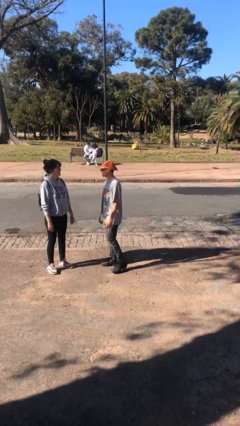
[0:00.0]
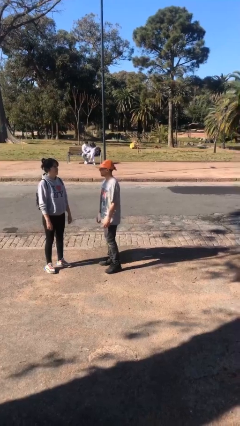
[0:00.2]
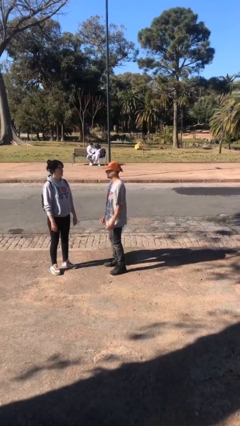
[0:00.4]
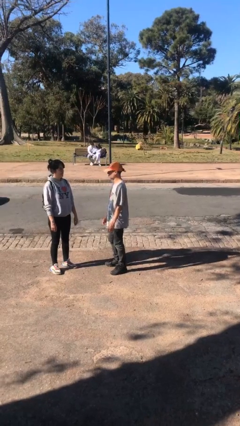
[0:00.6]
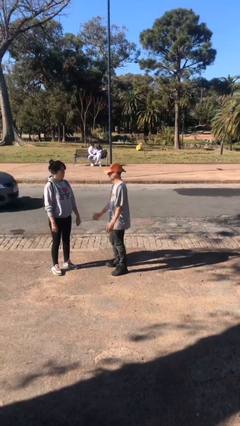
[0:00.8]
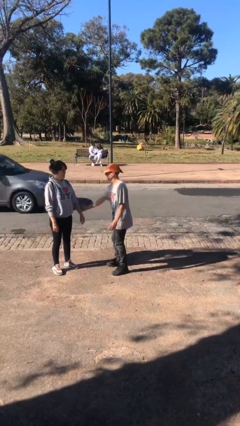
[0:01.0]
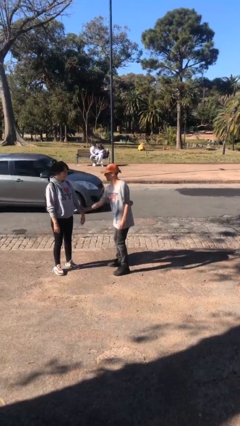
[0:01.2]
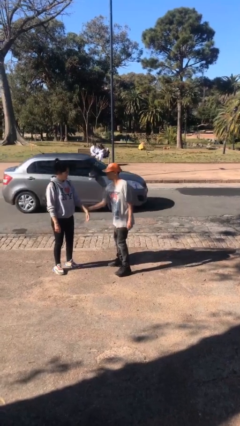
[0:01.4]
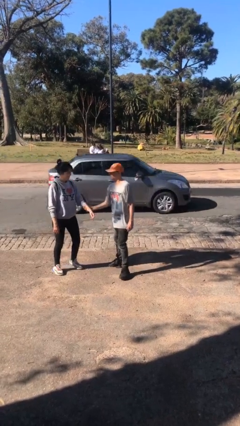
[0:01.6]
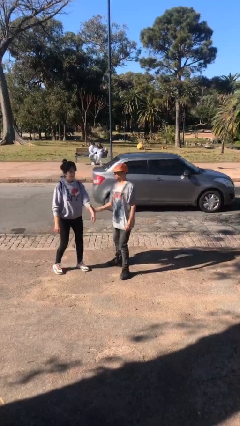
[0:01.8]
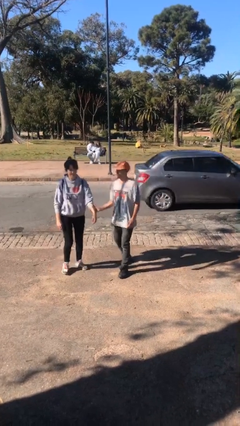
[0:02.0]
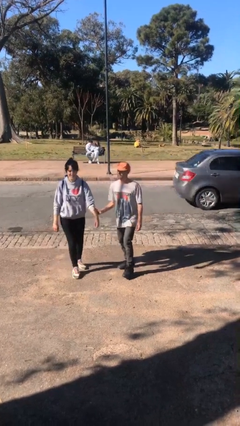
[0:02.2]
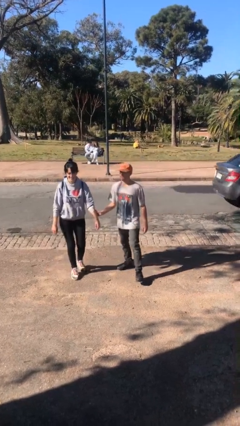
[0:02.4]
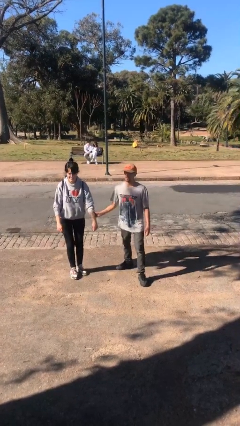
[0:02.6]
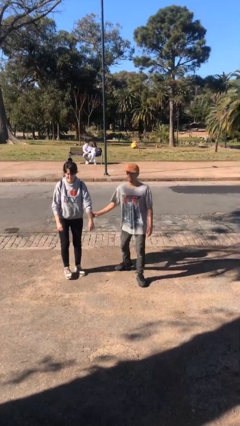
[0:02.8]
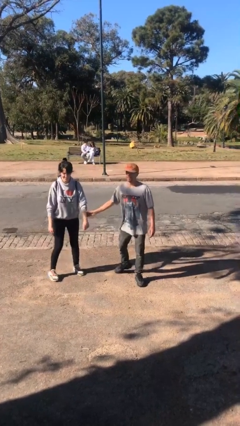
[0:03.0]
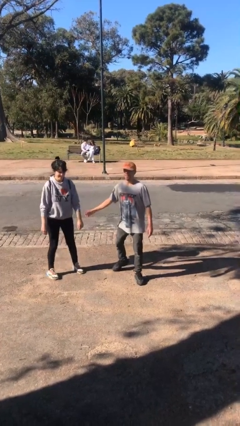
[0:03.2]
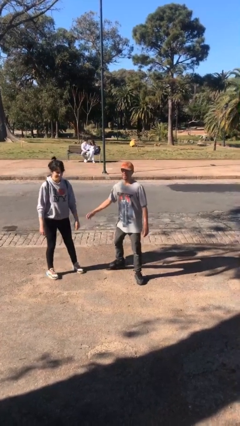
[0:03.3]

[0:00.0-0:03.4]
person grabs person by forearm

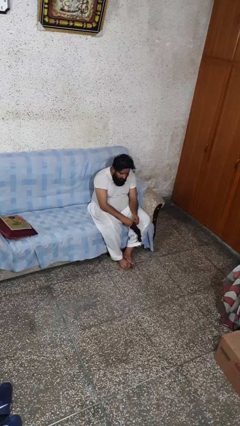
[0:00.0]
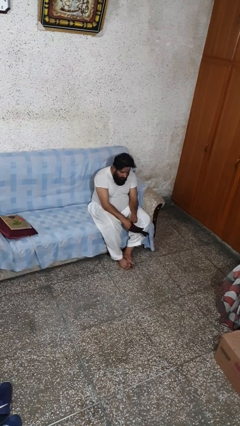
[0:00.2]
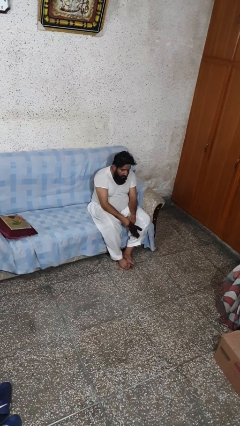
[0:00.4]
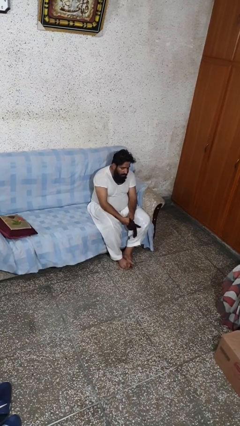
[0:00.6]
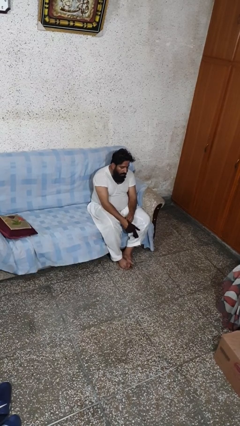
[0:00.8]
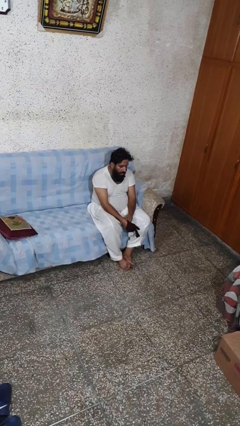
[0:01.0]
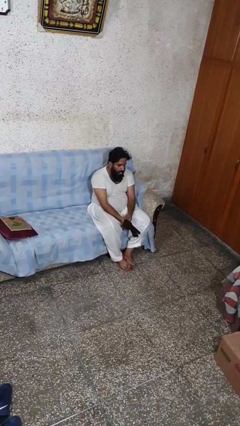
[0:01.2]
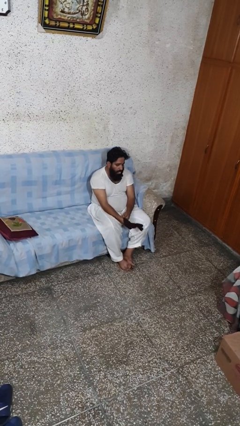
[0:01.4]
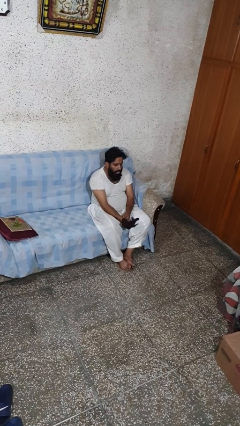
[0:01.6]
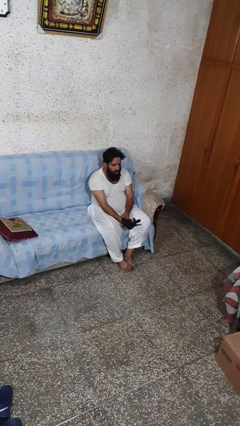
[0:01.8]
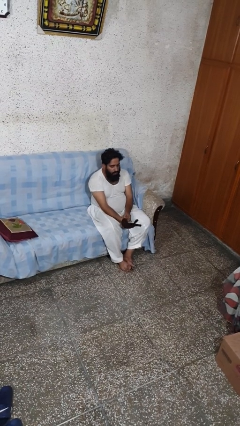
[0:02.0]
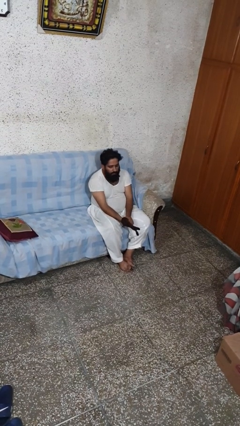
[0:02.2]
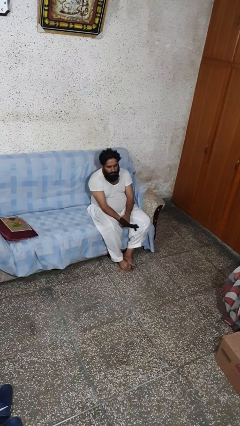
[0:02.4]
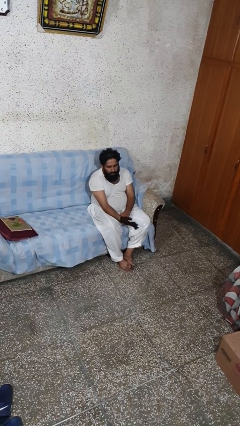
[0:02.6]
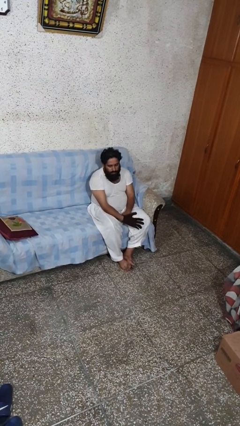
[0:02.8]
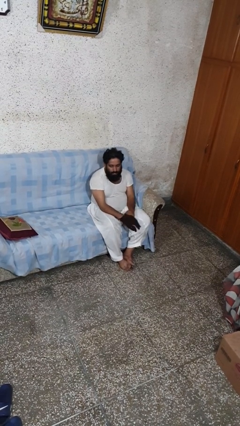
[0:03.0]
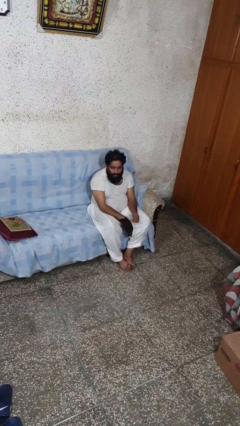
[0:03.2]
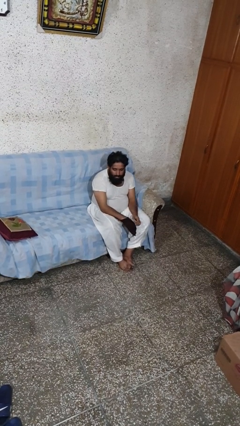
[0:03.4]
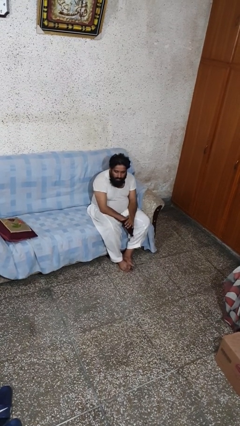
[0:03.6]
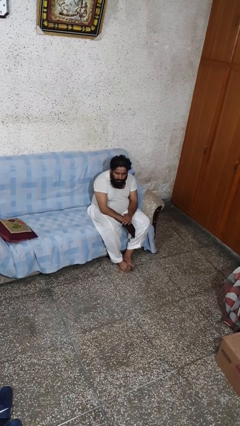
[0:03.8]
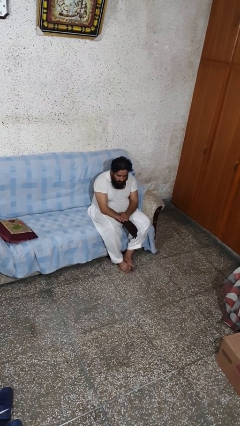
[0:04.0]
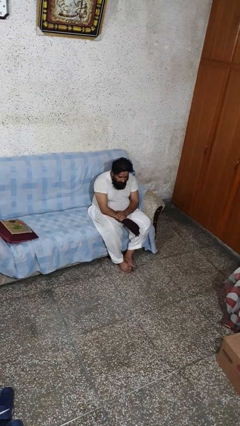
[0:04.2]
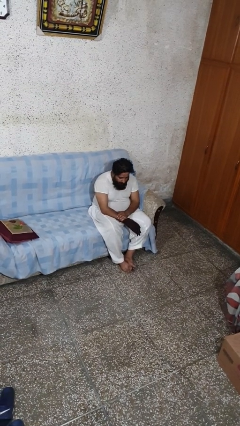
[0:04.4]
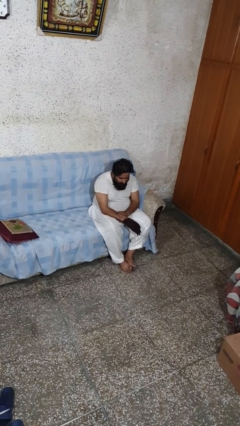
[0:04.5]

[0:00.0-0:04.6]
person puts on gloves

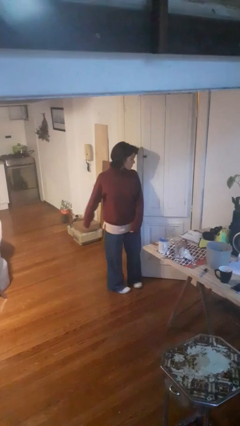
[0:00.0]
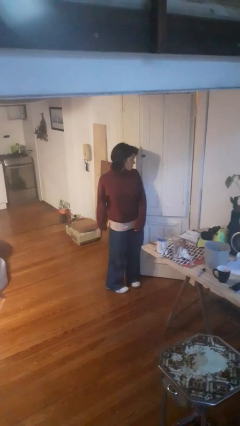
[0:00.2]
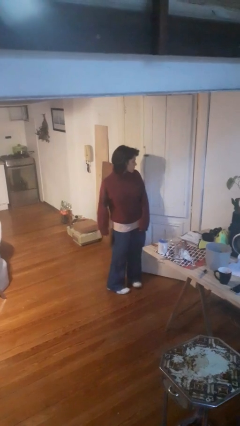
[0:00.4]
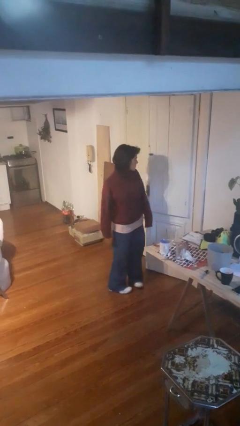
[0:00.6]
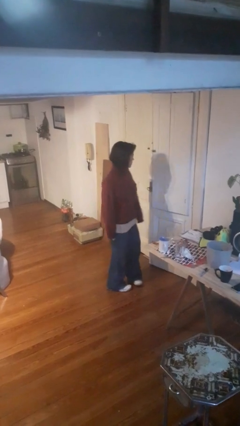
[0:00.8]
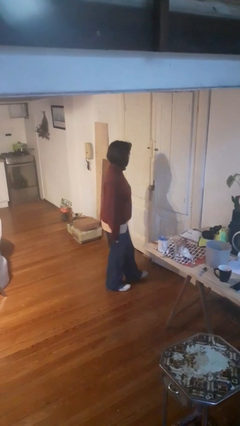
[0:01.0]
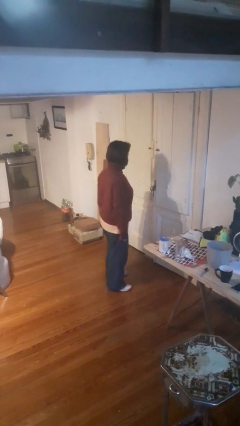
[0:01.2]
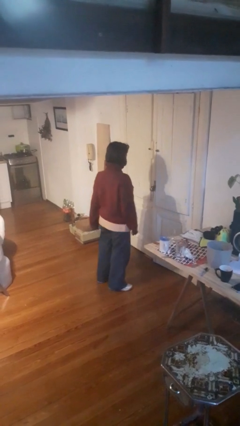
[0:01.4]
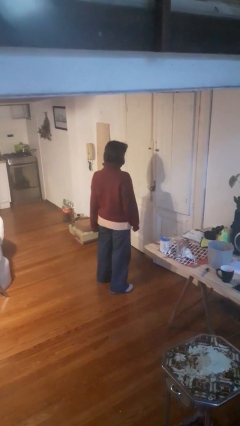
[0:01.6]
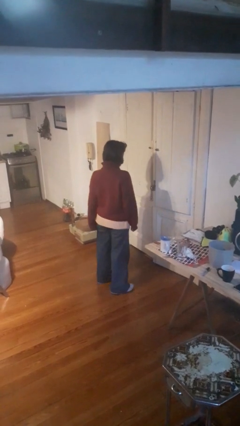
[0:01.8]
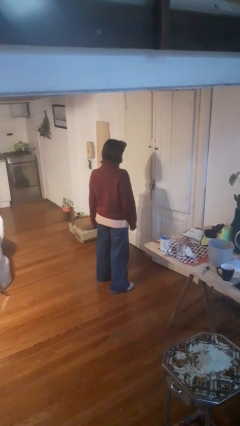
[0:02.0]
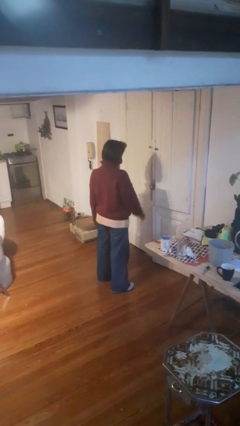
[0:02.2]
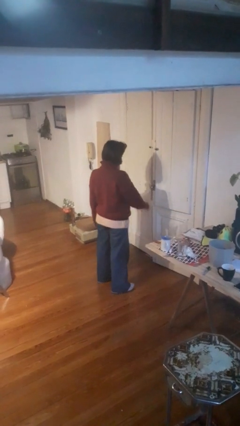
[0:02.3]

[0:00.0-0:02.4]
person closes door with hip

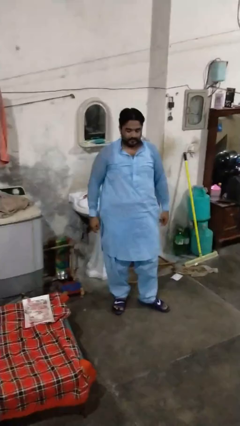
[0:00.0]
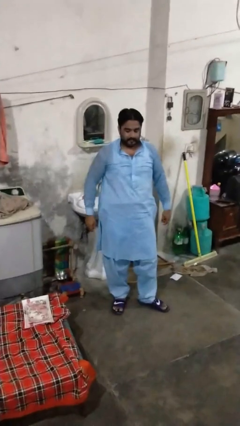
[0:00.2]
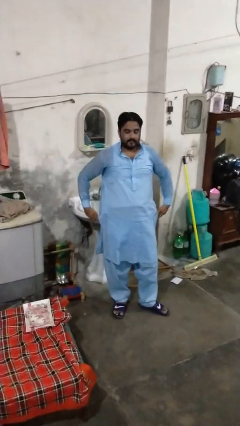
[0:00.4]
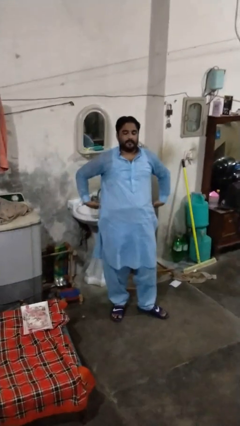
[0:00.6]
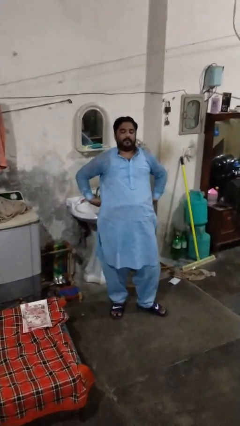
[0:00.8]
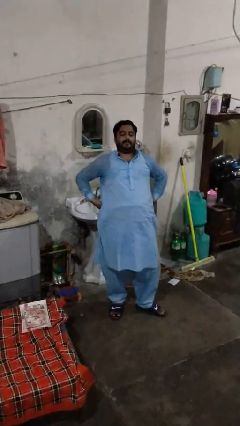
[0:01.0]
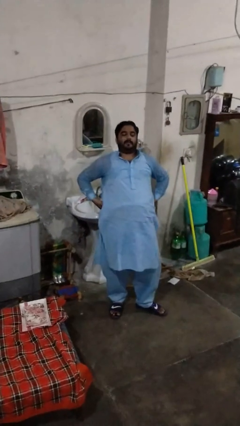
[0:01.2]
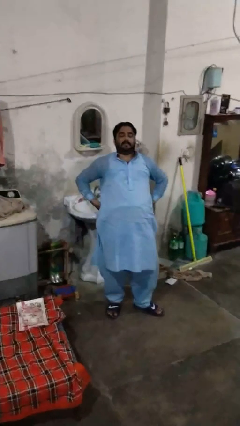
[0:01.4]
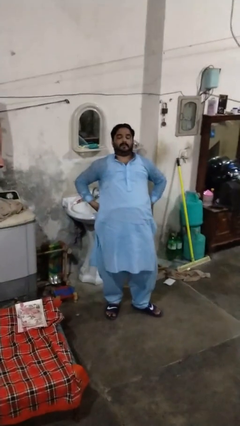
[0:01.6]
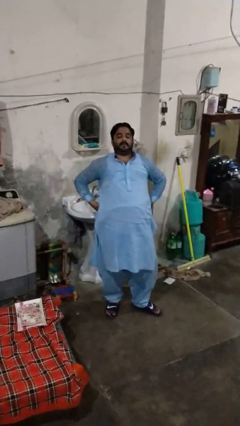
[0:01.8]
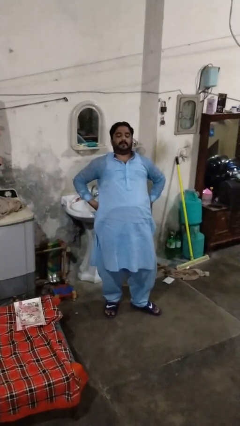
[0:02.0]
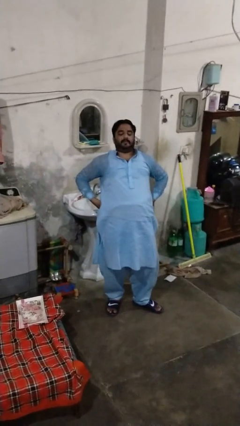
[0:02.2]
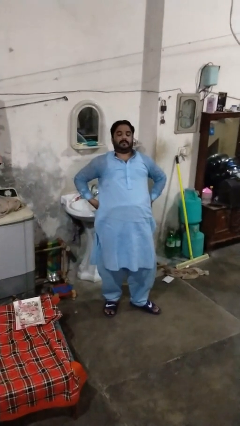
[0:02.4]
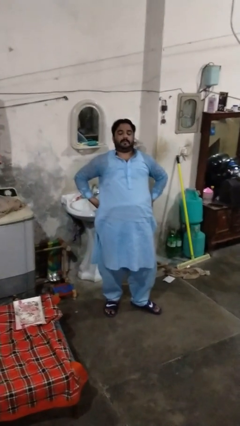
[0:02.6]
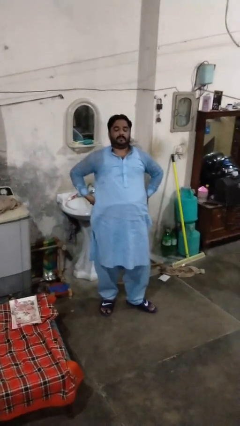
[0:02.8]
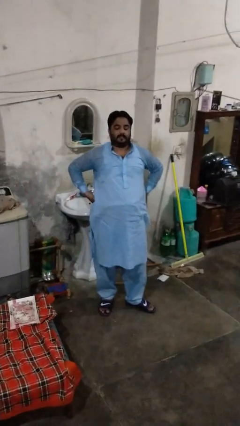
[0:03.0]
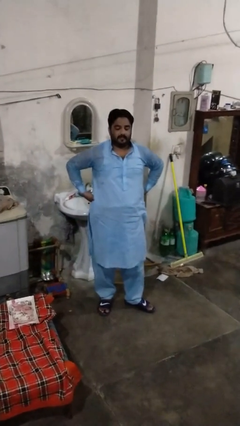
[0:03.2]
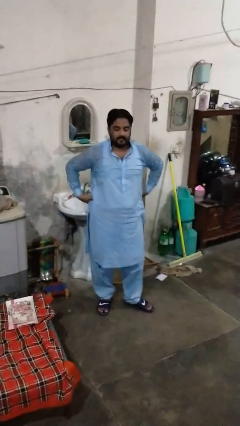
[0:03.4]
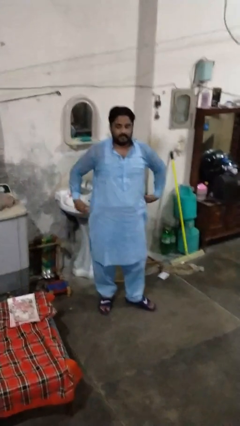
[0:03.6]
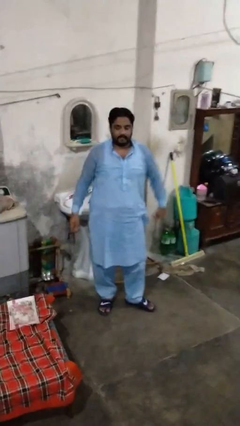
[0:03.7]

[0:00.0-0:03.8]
person stretches back

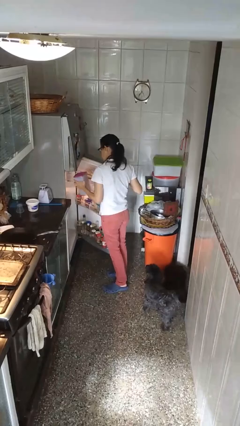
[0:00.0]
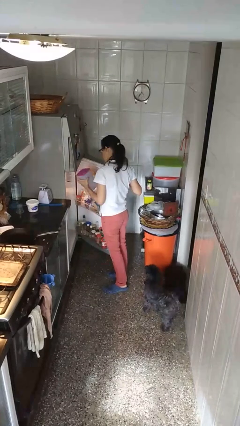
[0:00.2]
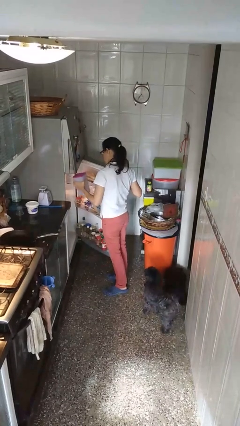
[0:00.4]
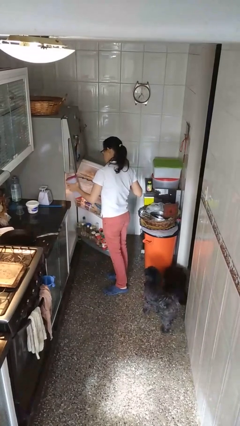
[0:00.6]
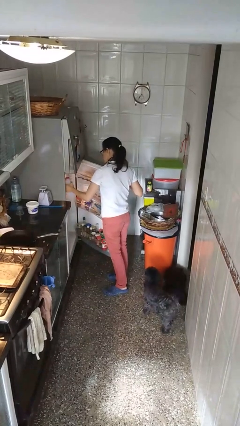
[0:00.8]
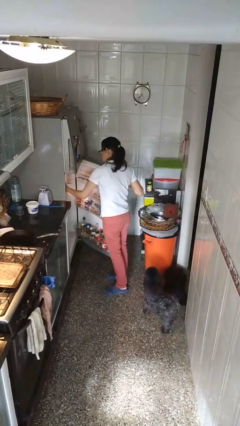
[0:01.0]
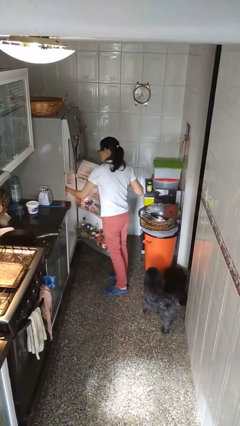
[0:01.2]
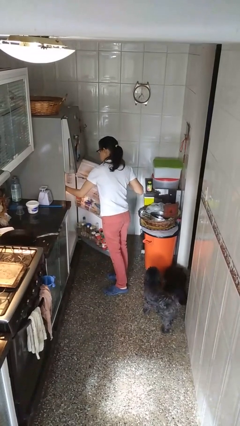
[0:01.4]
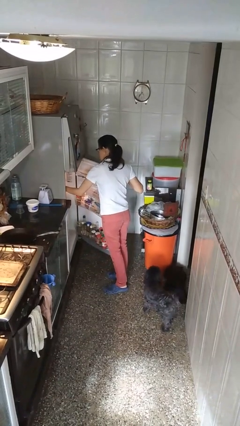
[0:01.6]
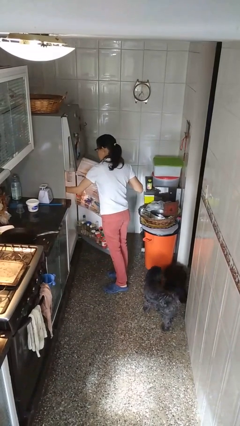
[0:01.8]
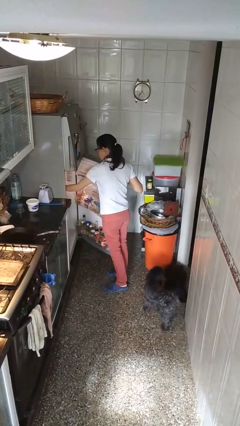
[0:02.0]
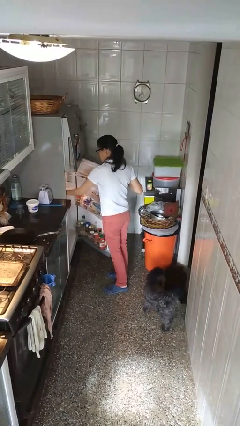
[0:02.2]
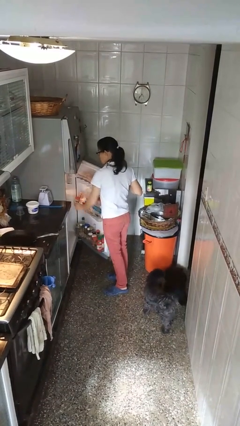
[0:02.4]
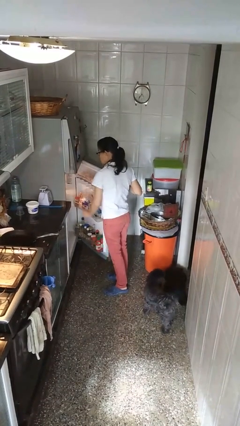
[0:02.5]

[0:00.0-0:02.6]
person puts object into refrigerator

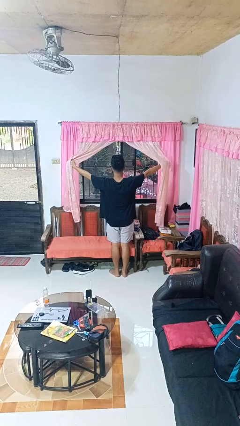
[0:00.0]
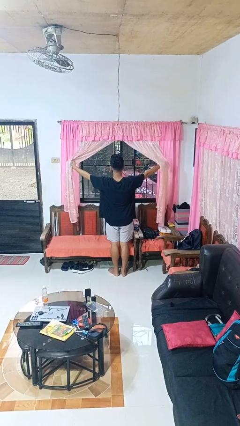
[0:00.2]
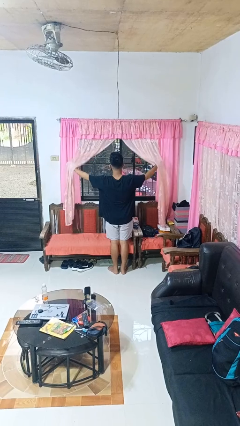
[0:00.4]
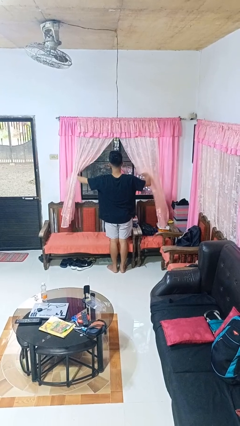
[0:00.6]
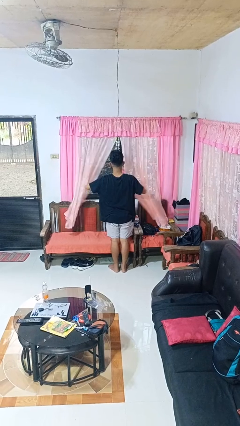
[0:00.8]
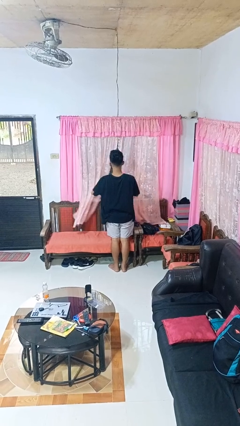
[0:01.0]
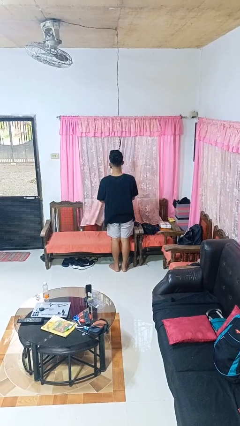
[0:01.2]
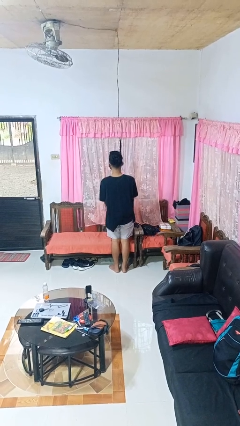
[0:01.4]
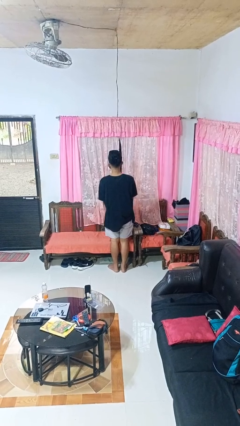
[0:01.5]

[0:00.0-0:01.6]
person closes curtains
